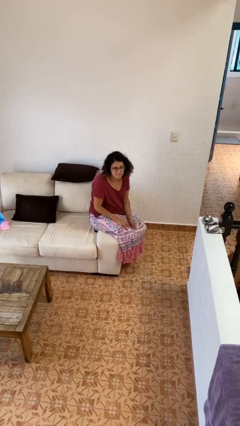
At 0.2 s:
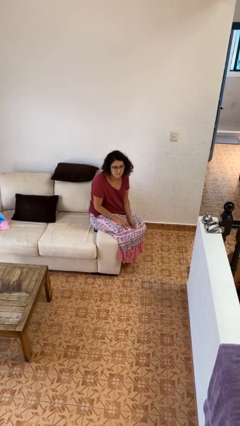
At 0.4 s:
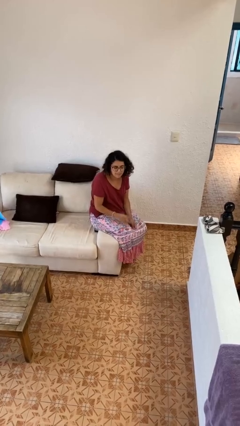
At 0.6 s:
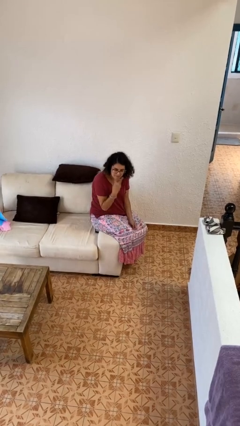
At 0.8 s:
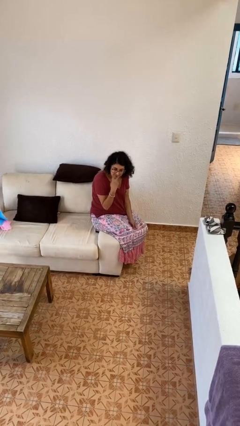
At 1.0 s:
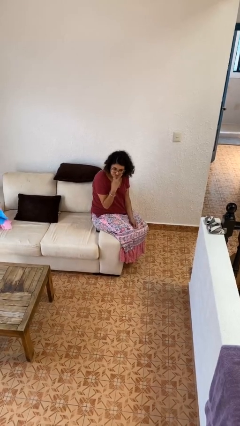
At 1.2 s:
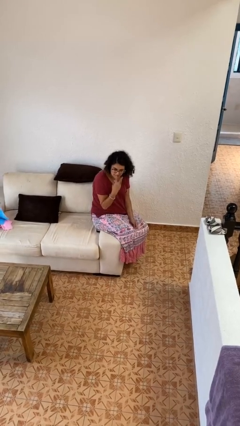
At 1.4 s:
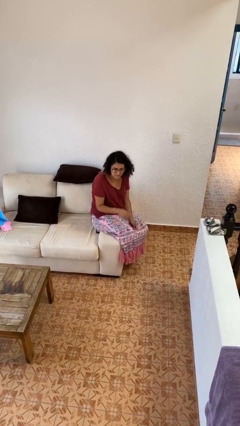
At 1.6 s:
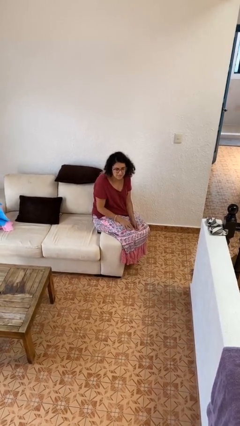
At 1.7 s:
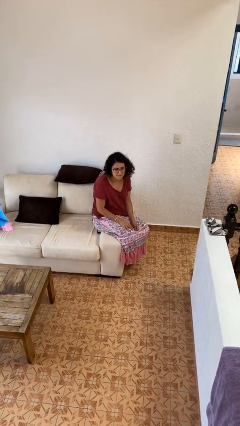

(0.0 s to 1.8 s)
person gestures watch closely

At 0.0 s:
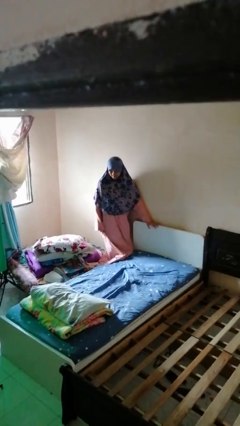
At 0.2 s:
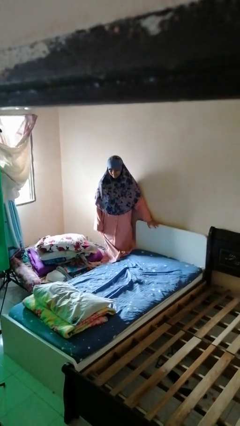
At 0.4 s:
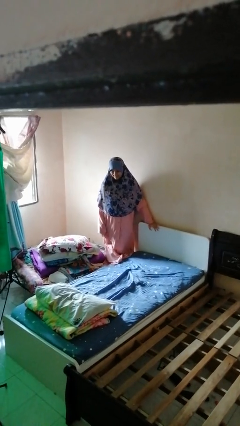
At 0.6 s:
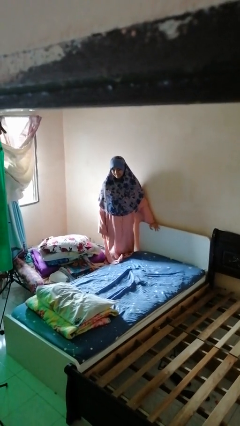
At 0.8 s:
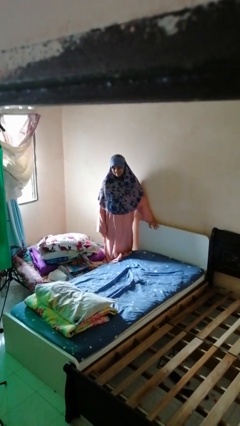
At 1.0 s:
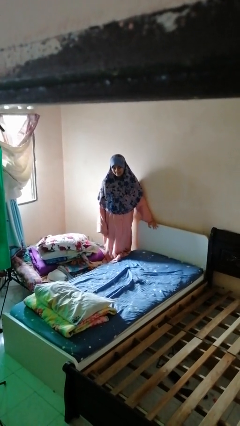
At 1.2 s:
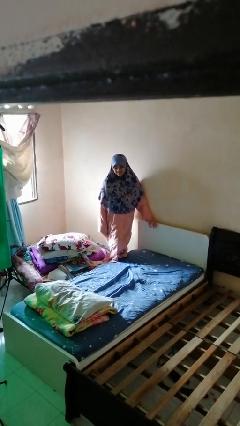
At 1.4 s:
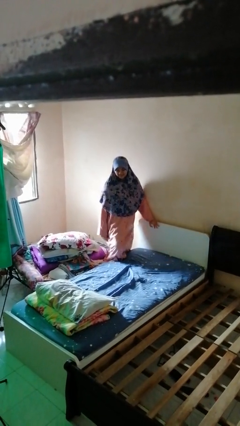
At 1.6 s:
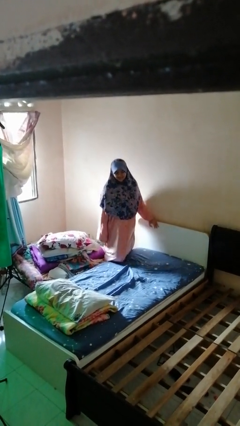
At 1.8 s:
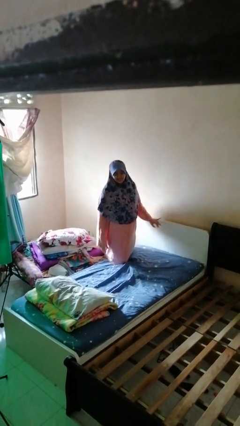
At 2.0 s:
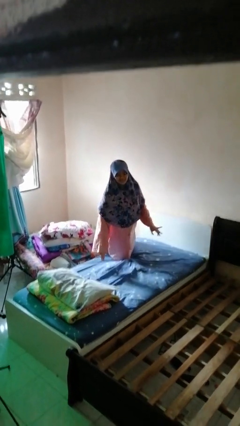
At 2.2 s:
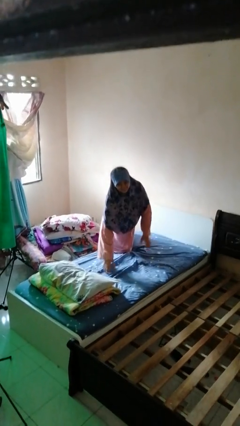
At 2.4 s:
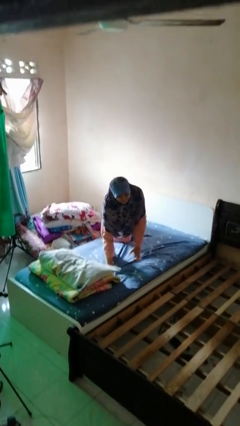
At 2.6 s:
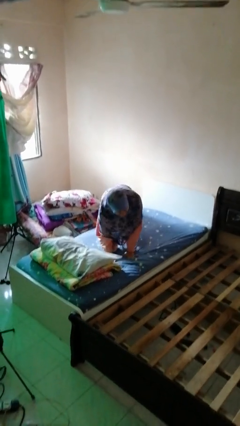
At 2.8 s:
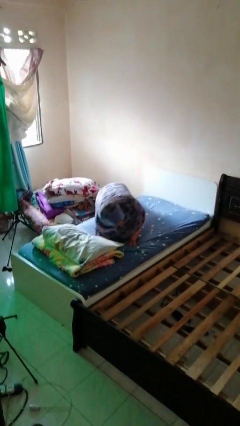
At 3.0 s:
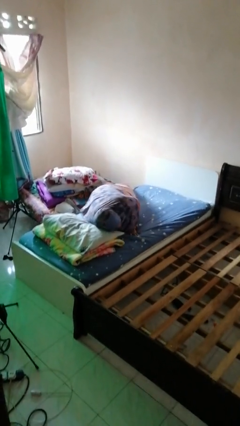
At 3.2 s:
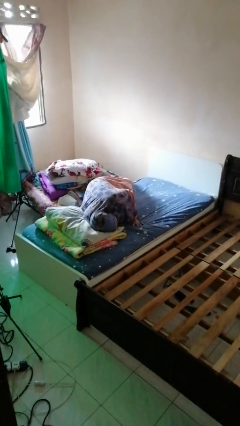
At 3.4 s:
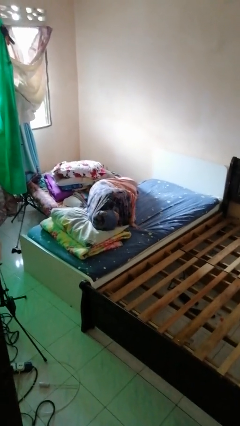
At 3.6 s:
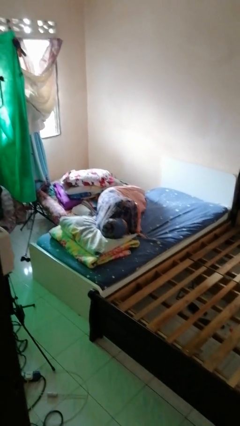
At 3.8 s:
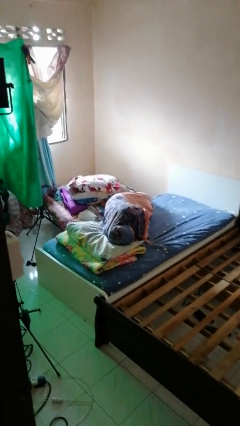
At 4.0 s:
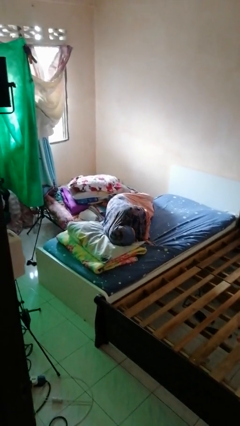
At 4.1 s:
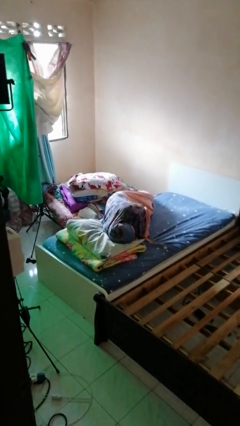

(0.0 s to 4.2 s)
person lies down on bed

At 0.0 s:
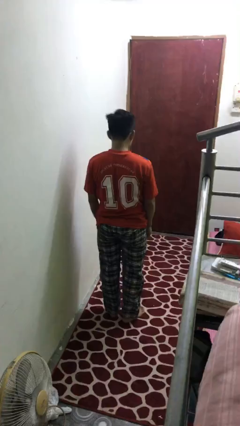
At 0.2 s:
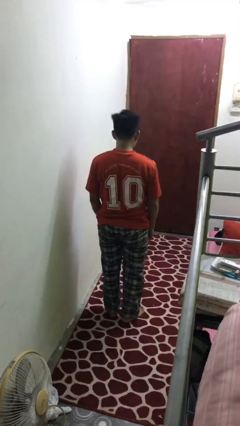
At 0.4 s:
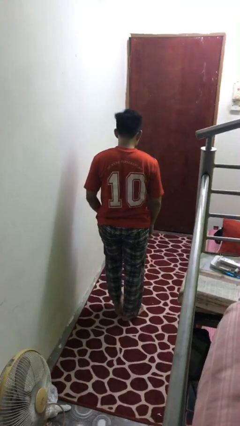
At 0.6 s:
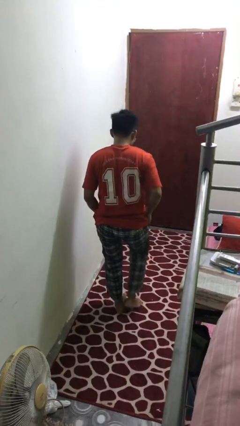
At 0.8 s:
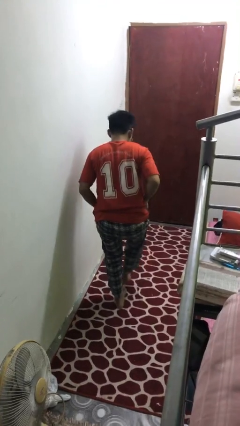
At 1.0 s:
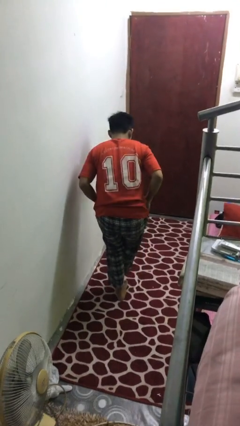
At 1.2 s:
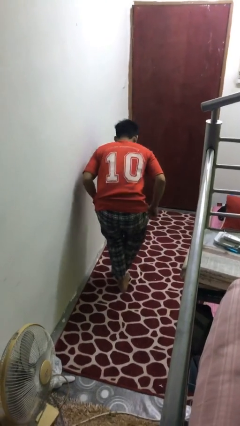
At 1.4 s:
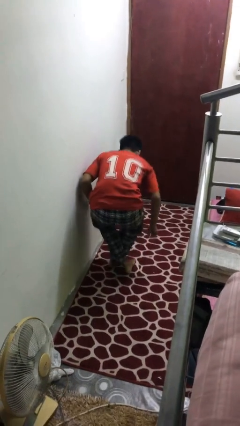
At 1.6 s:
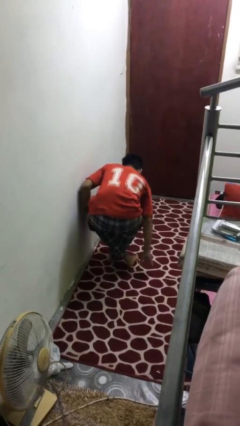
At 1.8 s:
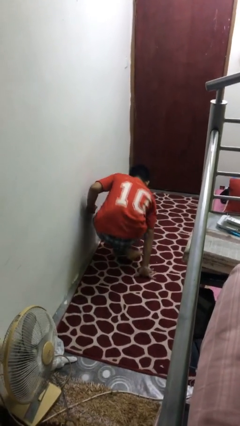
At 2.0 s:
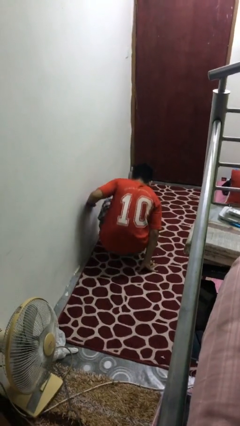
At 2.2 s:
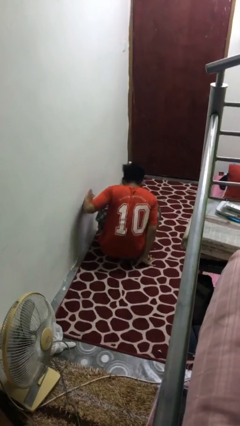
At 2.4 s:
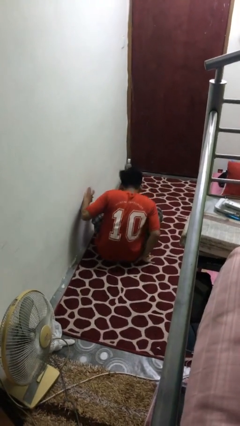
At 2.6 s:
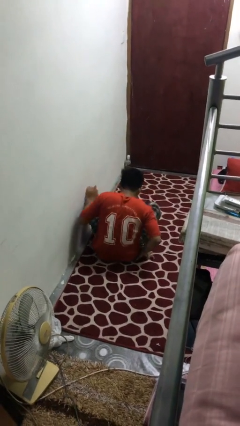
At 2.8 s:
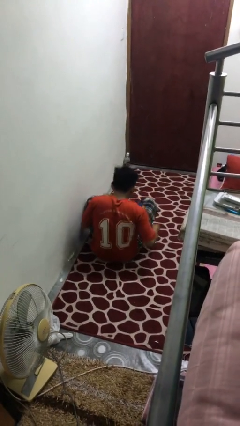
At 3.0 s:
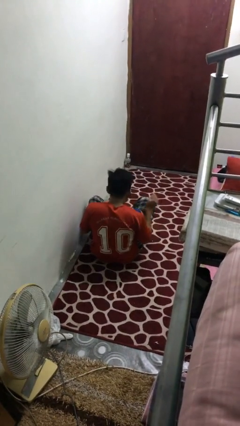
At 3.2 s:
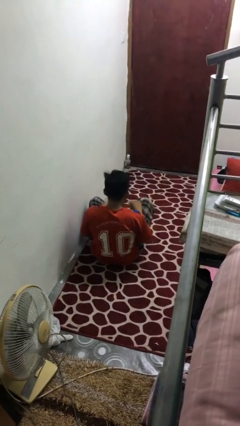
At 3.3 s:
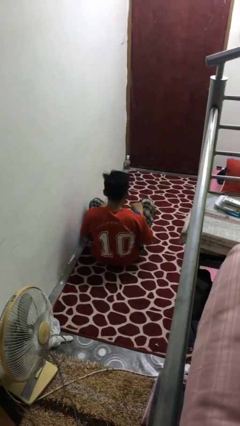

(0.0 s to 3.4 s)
person sits crisscross

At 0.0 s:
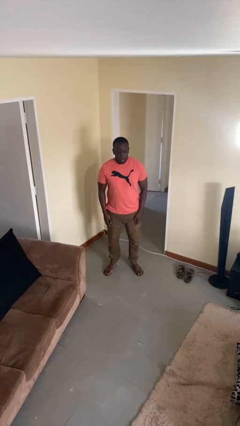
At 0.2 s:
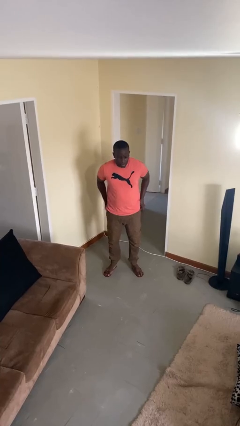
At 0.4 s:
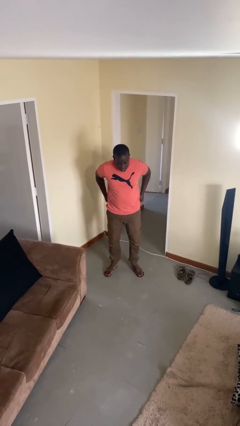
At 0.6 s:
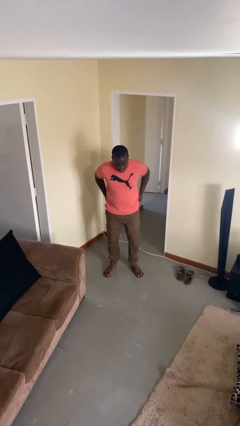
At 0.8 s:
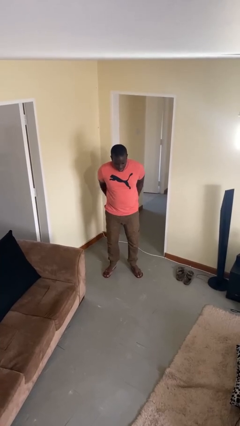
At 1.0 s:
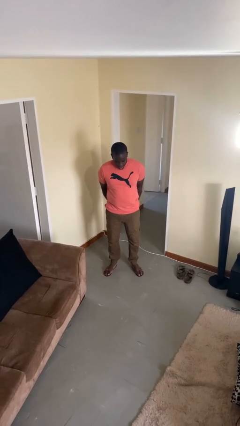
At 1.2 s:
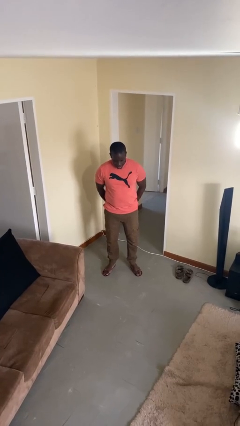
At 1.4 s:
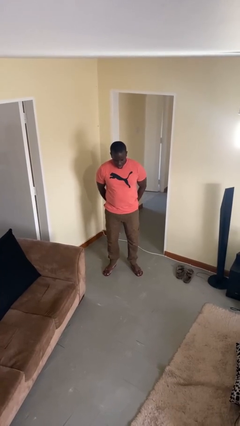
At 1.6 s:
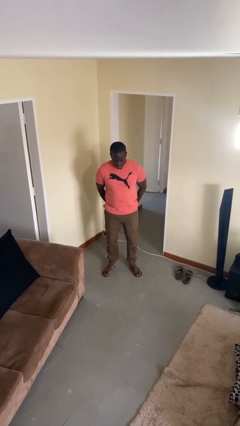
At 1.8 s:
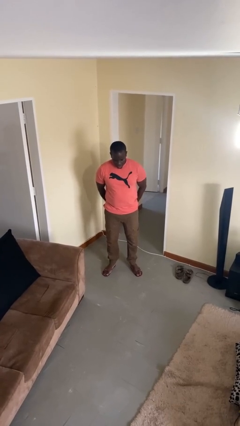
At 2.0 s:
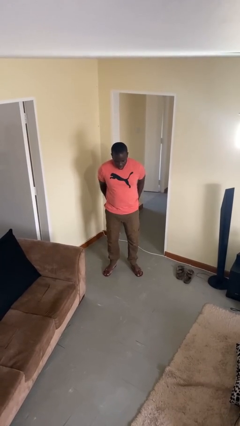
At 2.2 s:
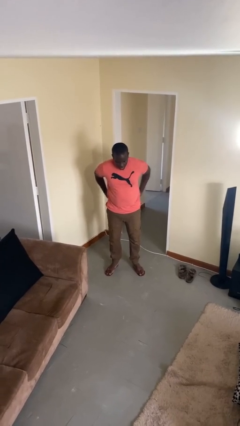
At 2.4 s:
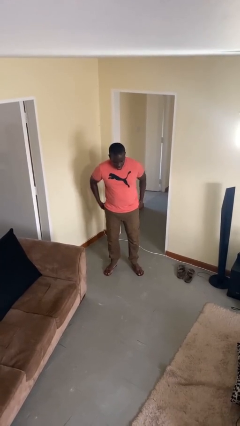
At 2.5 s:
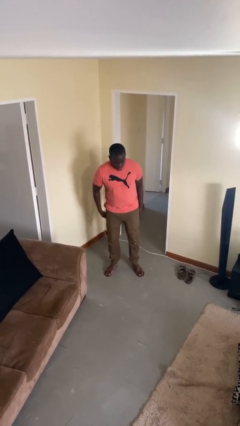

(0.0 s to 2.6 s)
person puts hands in back pockets

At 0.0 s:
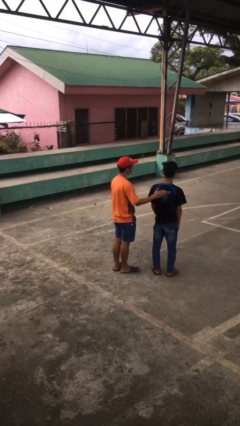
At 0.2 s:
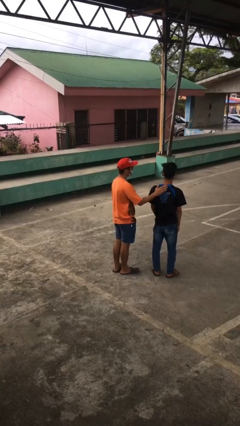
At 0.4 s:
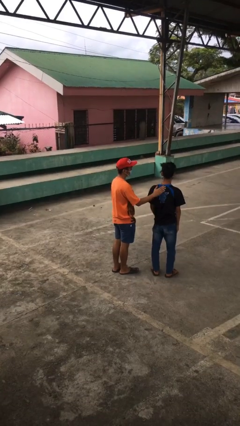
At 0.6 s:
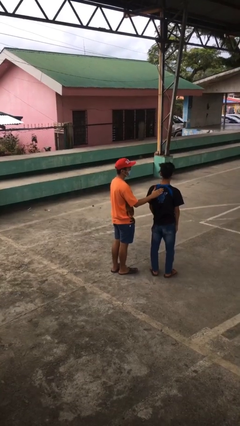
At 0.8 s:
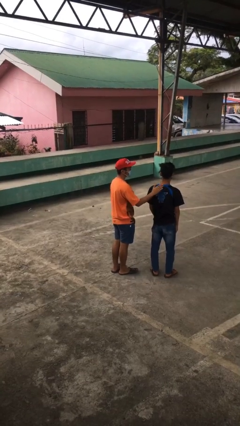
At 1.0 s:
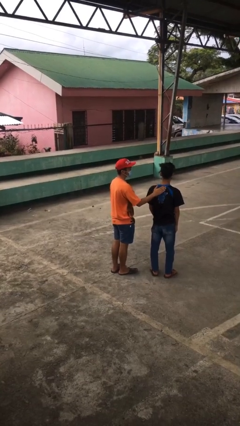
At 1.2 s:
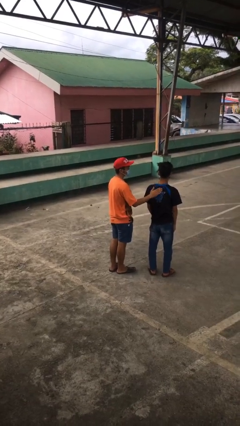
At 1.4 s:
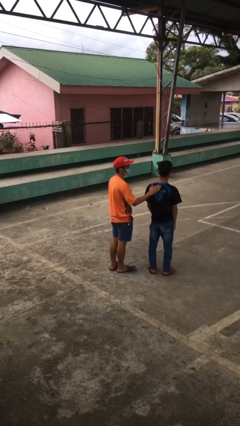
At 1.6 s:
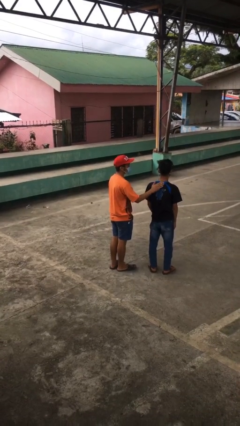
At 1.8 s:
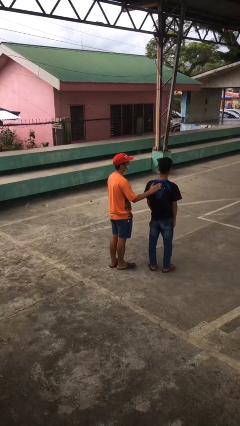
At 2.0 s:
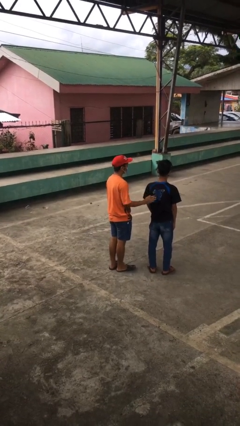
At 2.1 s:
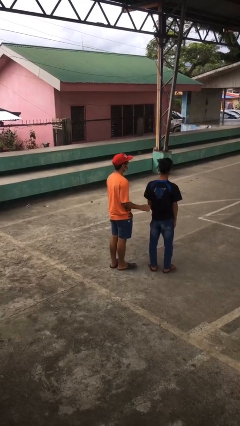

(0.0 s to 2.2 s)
person touches back of person

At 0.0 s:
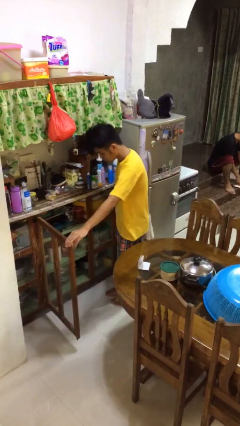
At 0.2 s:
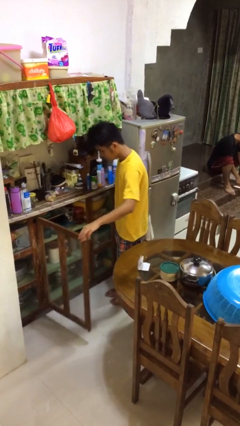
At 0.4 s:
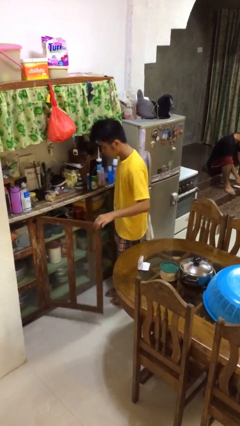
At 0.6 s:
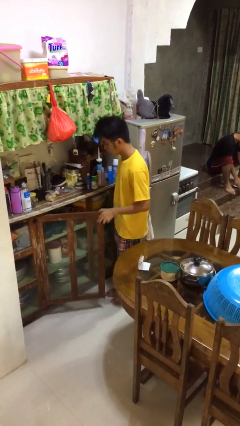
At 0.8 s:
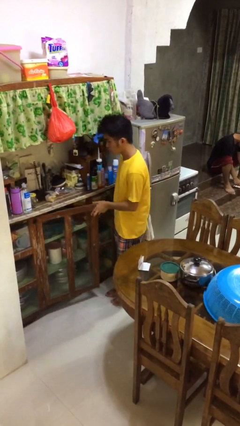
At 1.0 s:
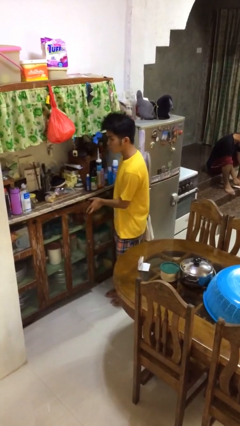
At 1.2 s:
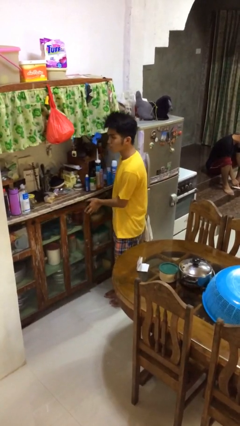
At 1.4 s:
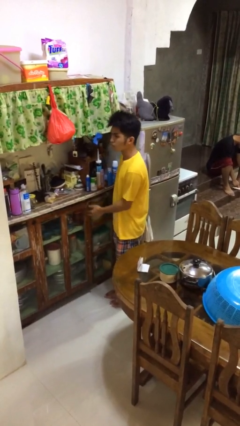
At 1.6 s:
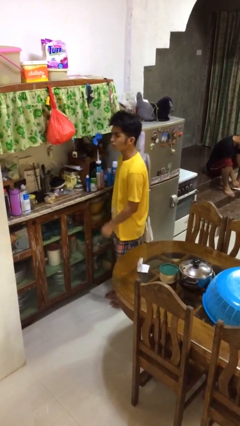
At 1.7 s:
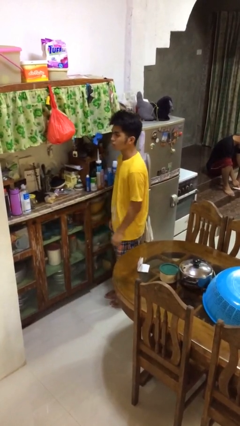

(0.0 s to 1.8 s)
person closes cabinet

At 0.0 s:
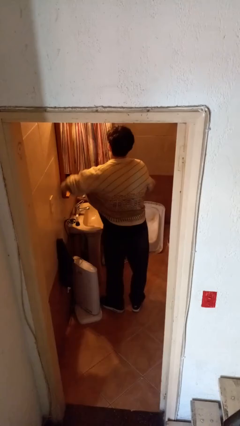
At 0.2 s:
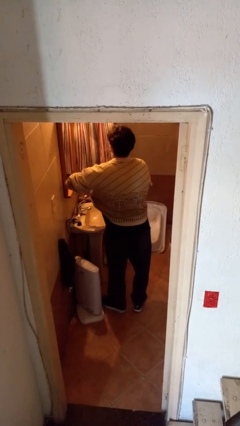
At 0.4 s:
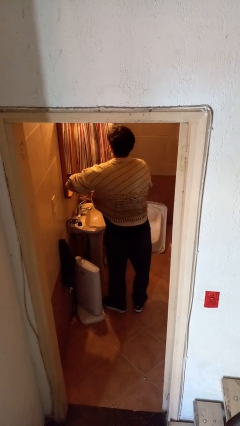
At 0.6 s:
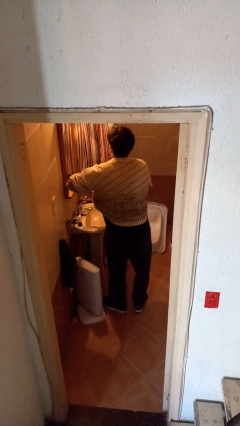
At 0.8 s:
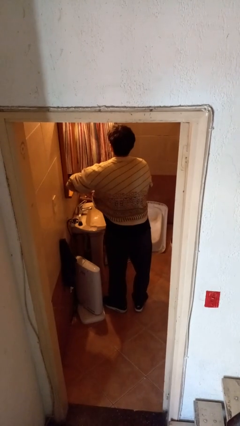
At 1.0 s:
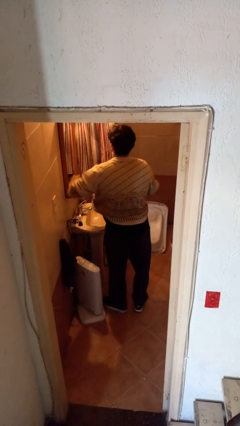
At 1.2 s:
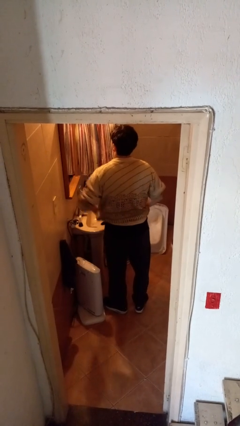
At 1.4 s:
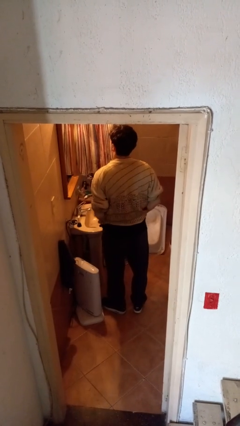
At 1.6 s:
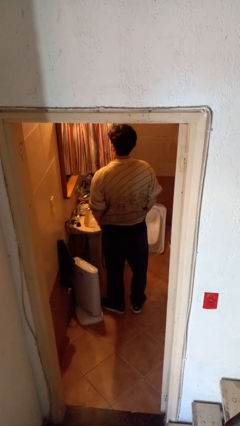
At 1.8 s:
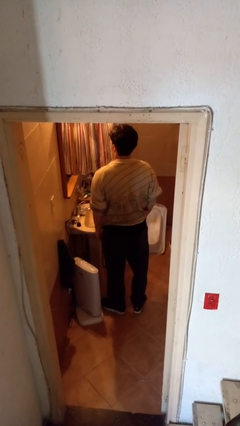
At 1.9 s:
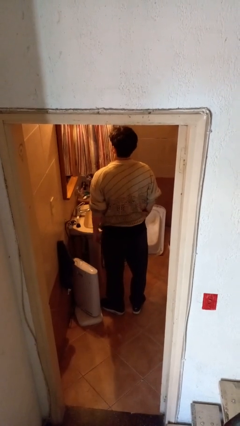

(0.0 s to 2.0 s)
person applies deodorant
